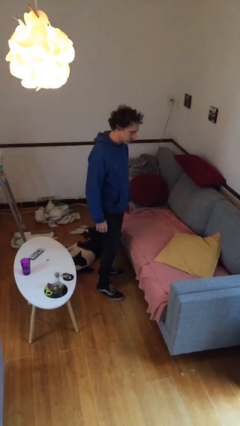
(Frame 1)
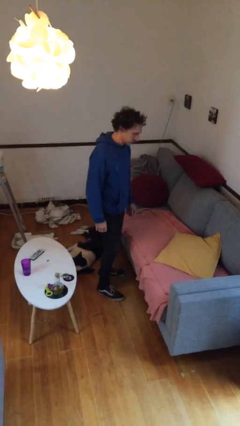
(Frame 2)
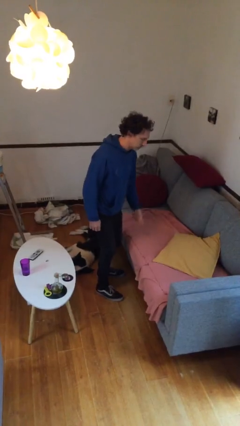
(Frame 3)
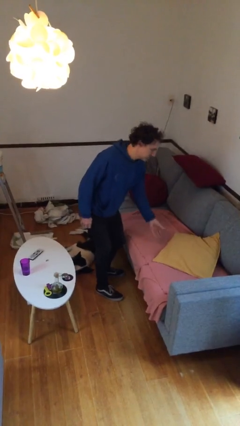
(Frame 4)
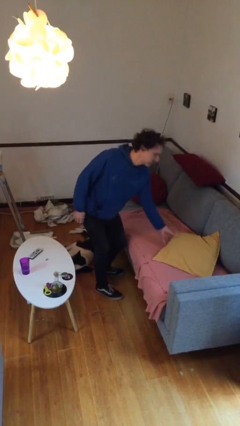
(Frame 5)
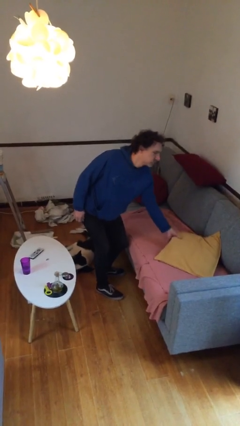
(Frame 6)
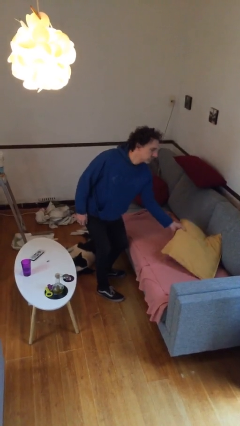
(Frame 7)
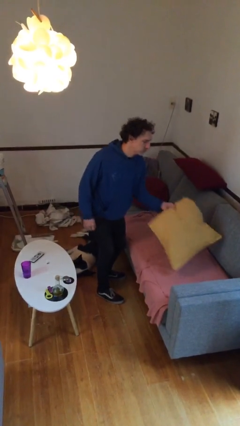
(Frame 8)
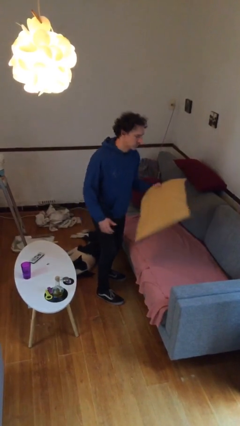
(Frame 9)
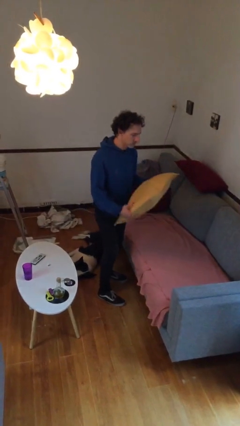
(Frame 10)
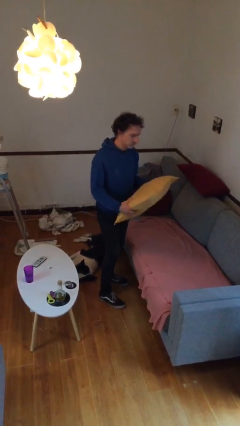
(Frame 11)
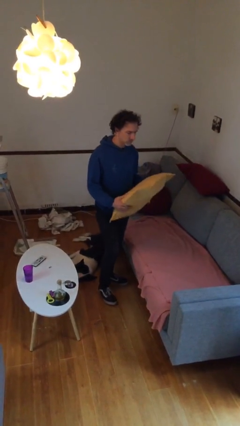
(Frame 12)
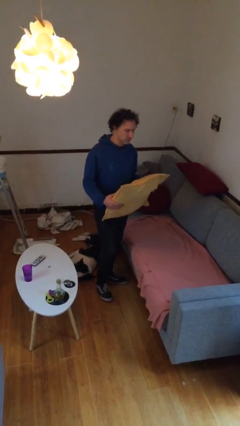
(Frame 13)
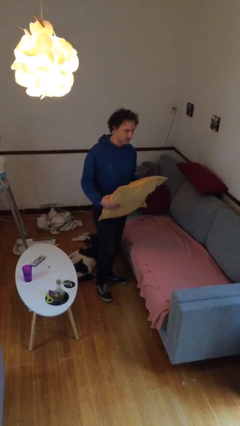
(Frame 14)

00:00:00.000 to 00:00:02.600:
person picks up object from couch

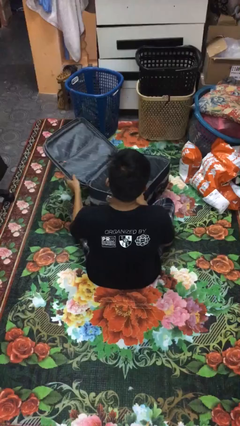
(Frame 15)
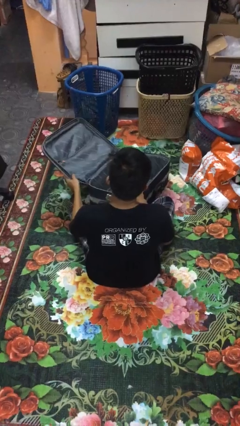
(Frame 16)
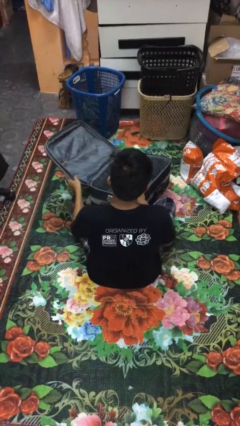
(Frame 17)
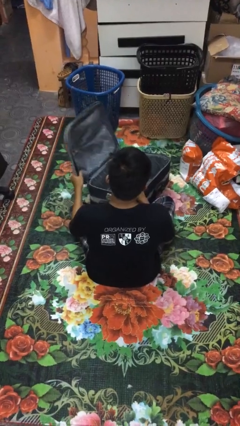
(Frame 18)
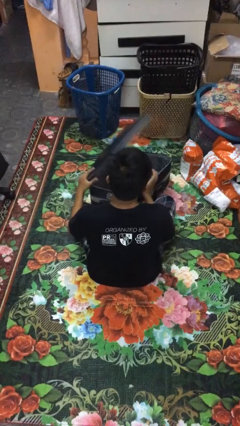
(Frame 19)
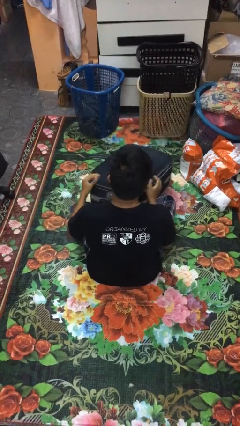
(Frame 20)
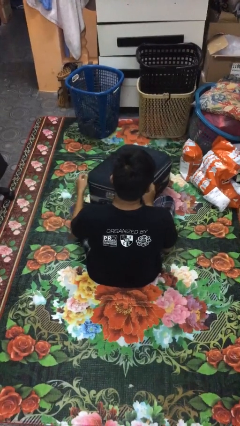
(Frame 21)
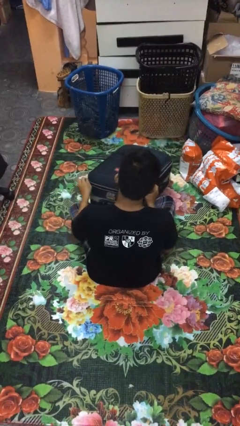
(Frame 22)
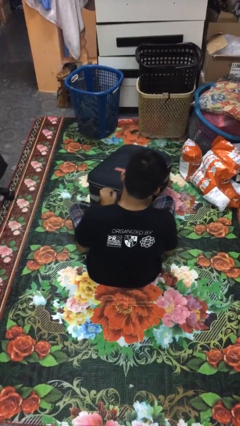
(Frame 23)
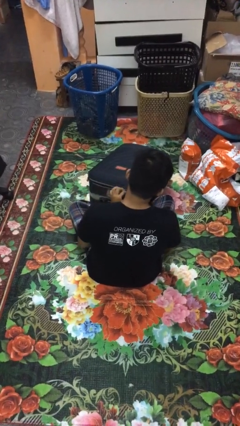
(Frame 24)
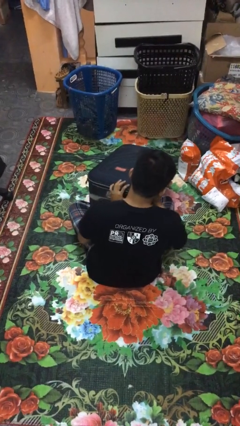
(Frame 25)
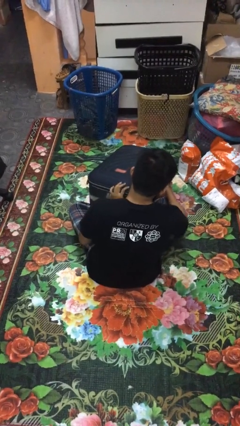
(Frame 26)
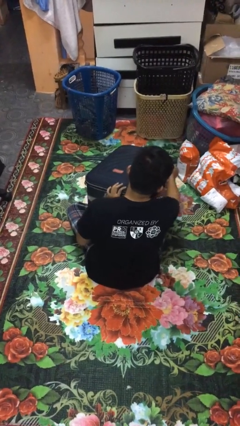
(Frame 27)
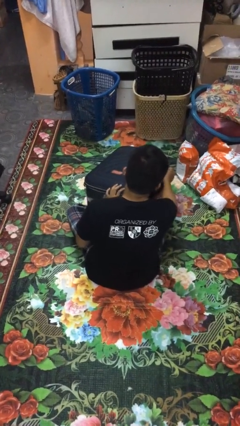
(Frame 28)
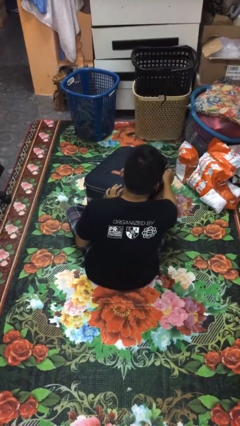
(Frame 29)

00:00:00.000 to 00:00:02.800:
person closes suitcase

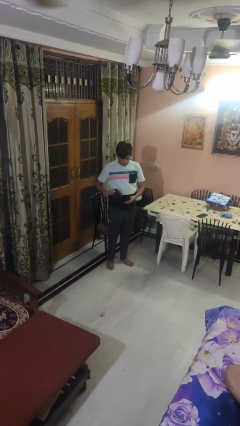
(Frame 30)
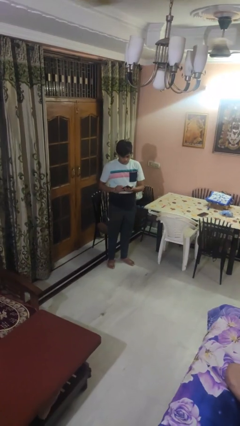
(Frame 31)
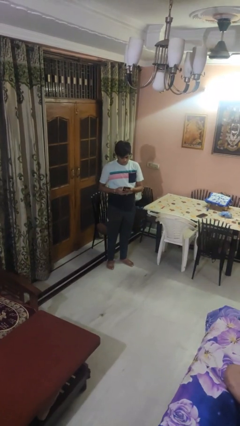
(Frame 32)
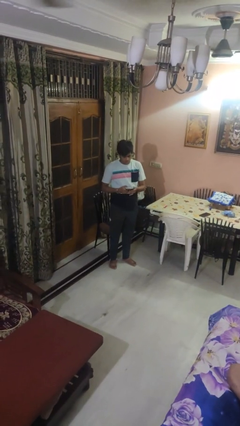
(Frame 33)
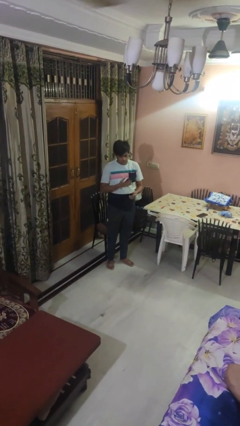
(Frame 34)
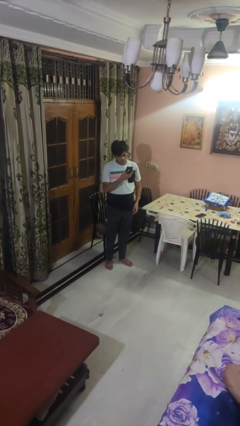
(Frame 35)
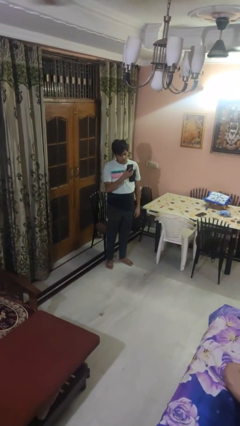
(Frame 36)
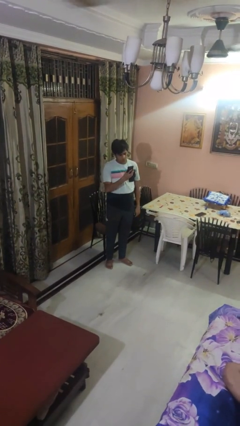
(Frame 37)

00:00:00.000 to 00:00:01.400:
person takes phone from pocket

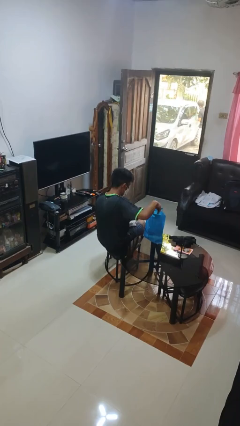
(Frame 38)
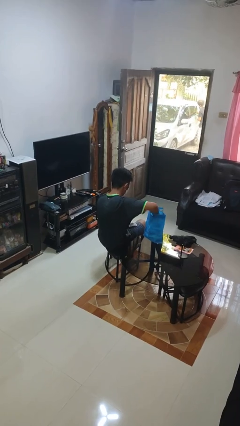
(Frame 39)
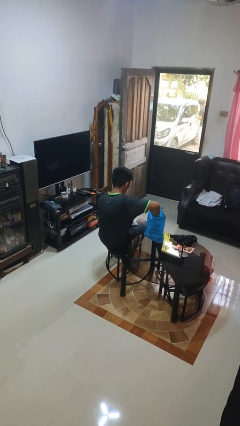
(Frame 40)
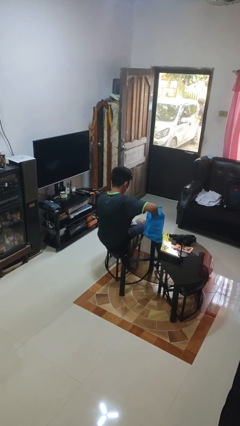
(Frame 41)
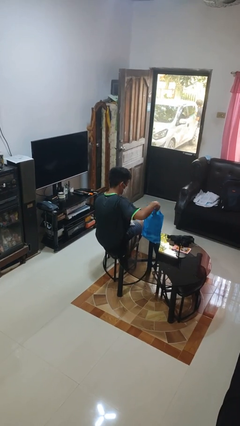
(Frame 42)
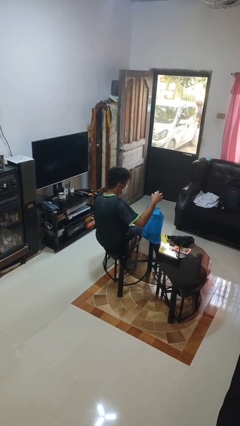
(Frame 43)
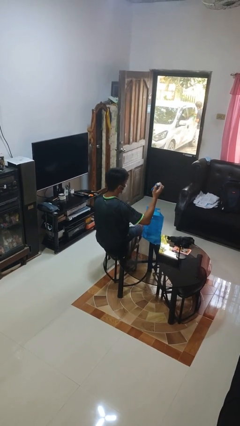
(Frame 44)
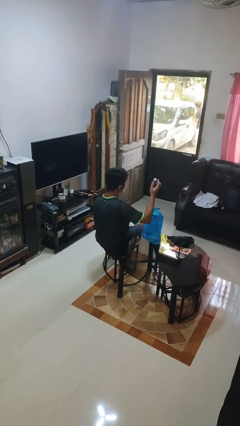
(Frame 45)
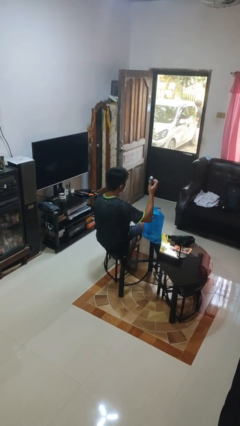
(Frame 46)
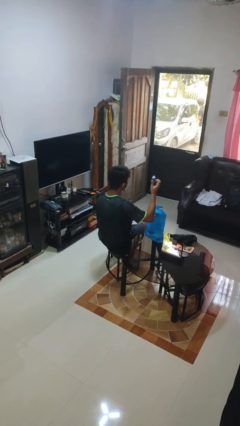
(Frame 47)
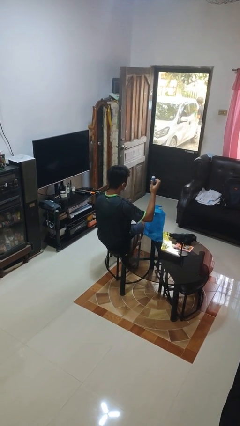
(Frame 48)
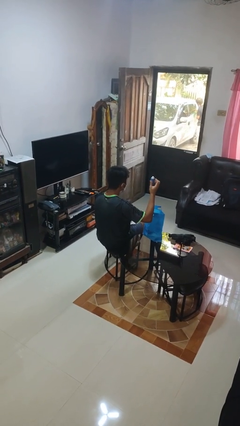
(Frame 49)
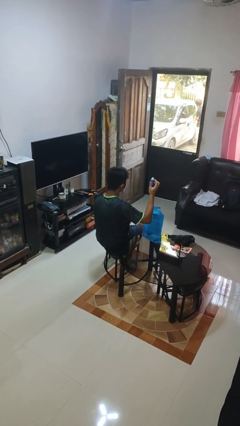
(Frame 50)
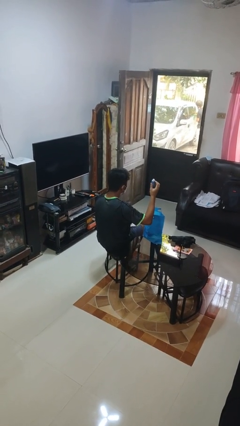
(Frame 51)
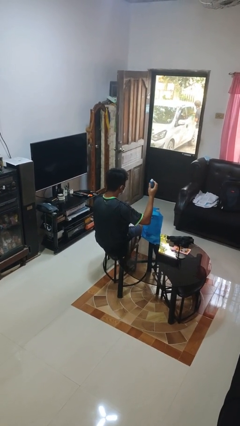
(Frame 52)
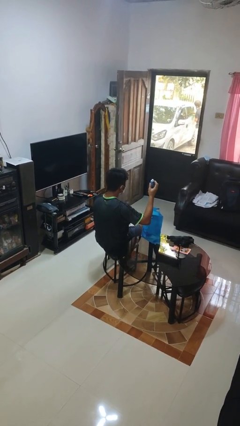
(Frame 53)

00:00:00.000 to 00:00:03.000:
person takes object from bag

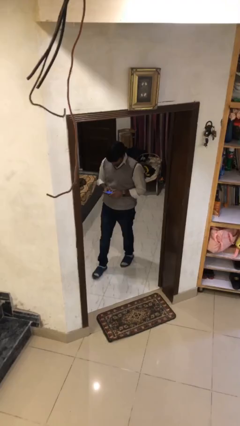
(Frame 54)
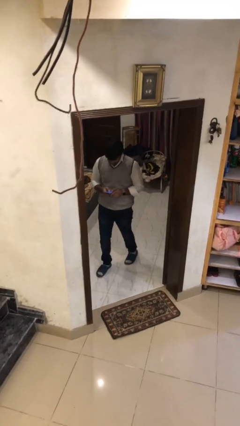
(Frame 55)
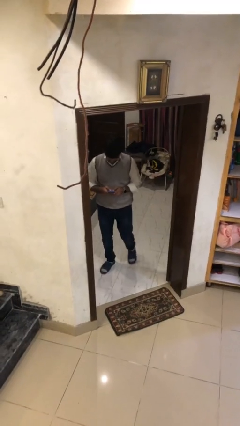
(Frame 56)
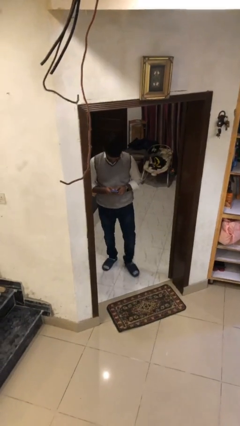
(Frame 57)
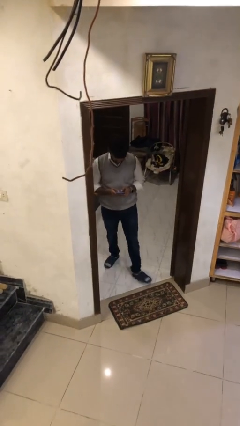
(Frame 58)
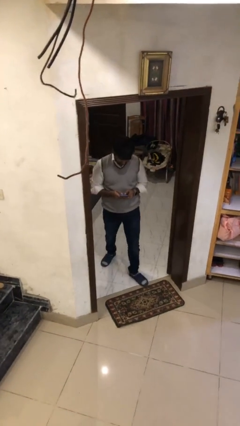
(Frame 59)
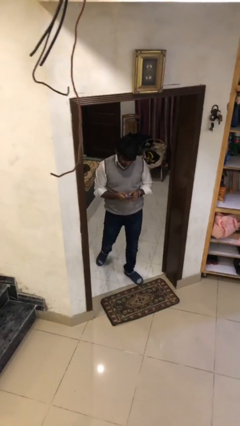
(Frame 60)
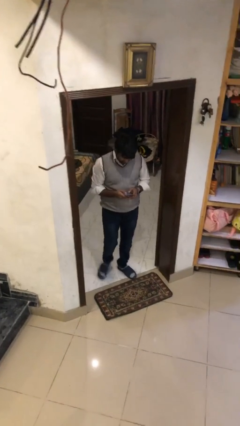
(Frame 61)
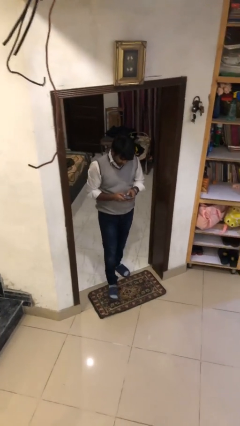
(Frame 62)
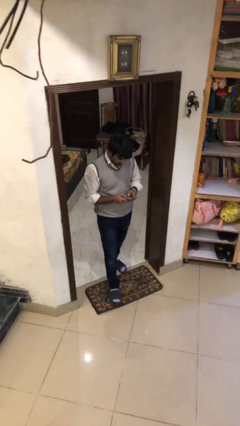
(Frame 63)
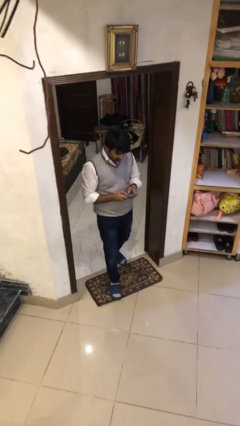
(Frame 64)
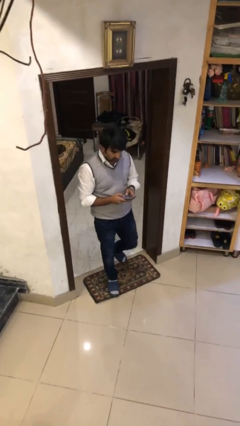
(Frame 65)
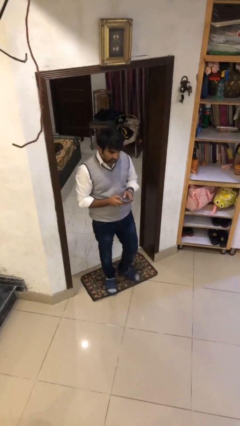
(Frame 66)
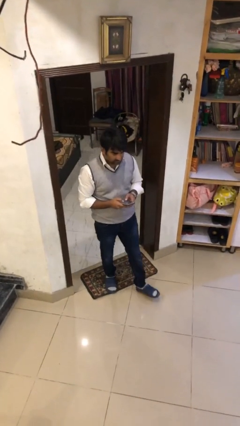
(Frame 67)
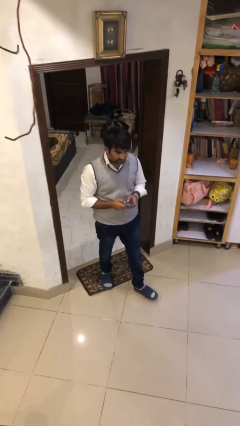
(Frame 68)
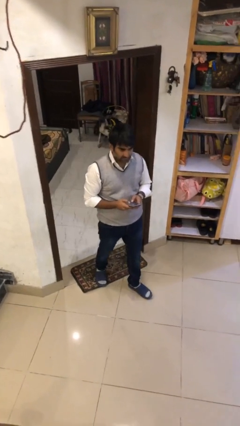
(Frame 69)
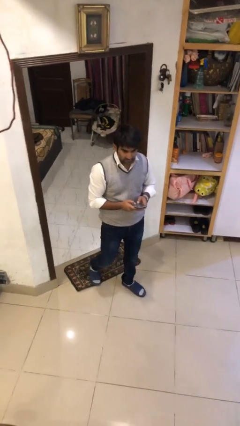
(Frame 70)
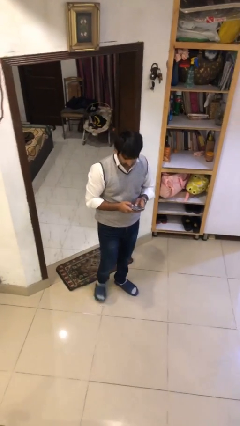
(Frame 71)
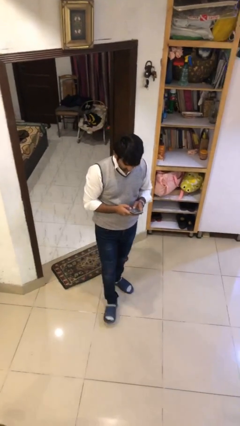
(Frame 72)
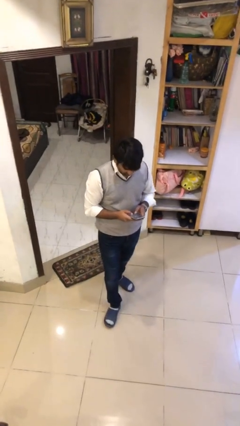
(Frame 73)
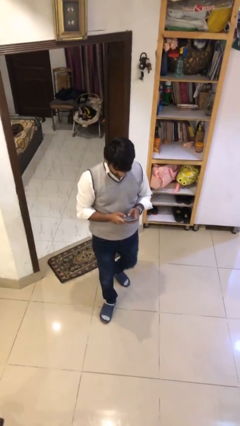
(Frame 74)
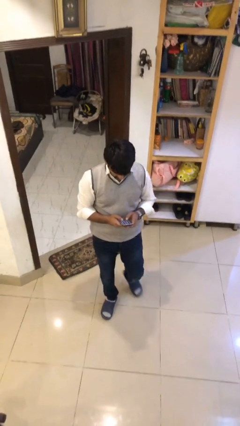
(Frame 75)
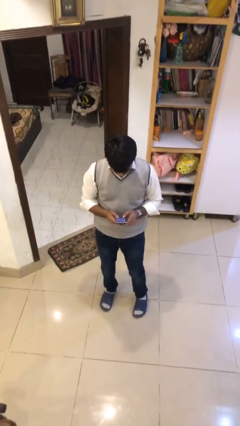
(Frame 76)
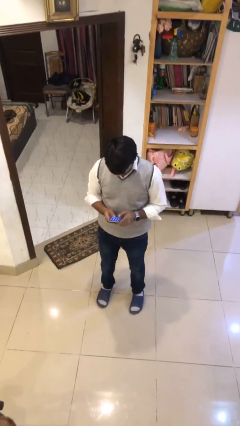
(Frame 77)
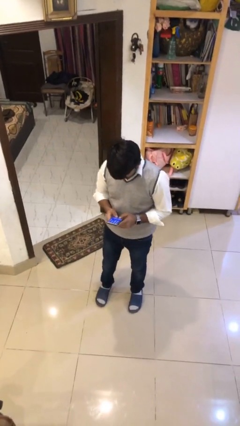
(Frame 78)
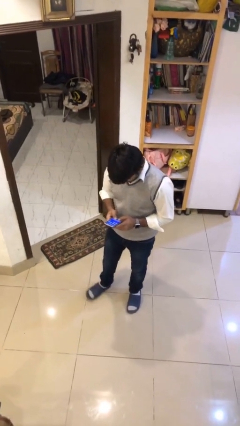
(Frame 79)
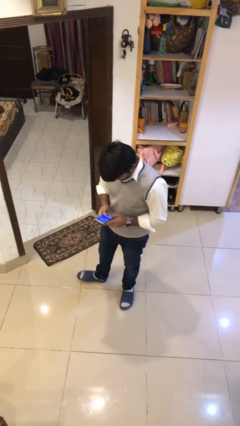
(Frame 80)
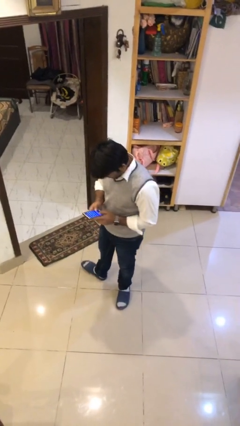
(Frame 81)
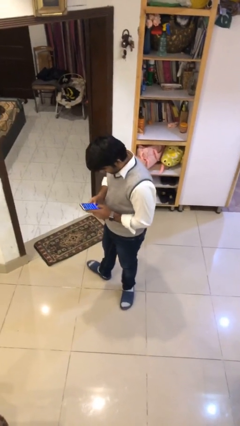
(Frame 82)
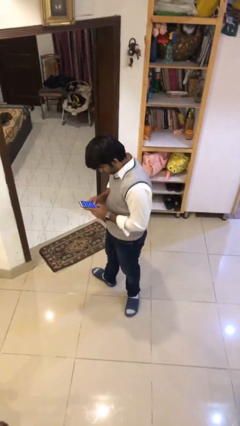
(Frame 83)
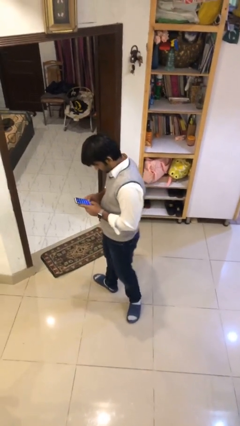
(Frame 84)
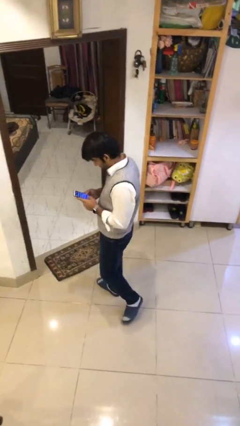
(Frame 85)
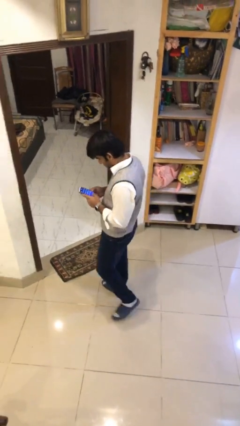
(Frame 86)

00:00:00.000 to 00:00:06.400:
person enters scene through structure

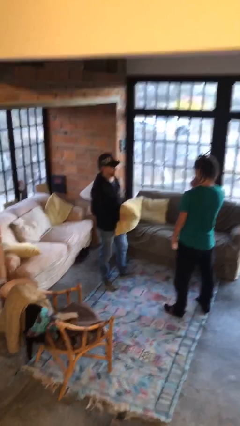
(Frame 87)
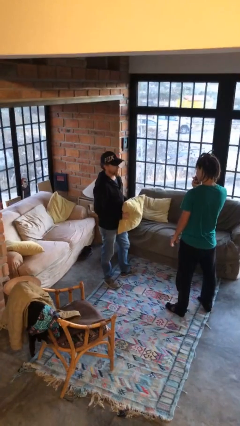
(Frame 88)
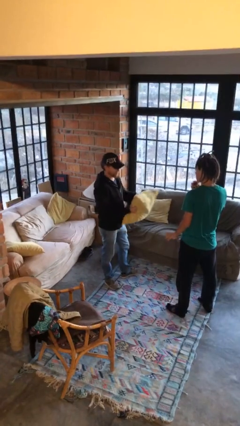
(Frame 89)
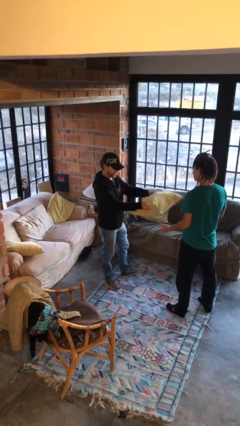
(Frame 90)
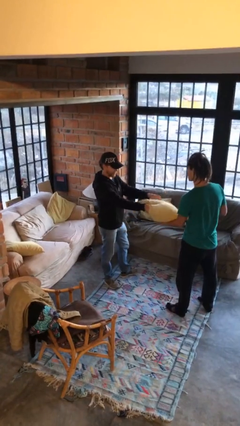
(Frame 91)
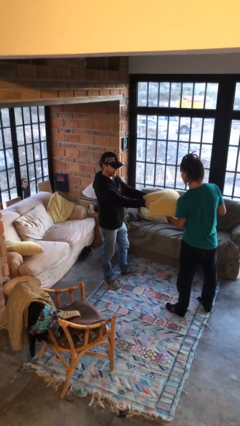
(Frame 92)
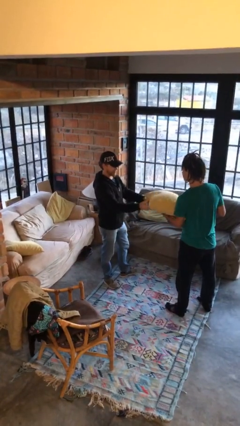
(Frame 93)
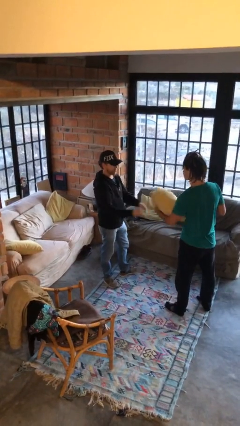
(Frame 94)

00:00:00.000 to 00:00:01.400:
person transfers object to person
